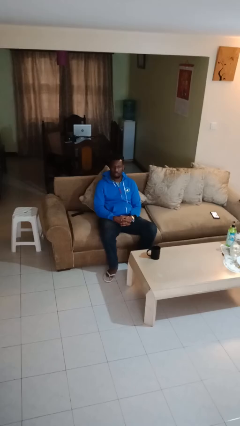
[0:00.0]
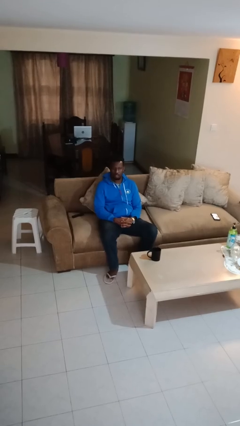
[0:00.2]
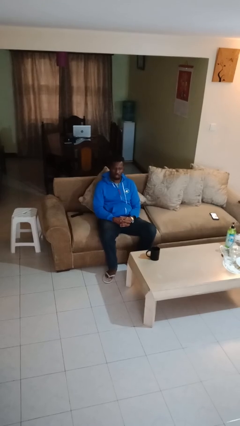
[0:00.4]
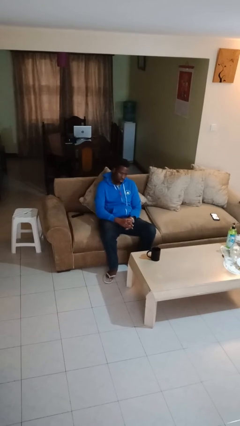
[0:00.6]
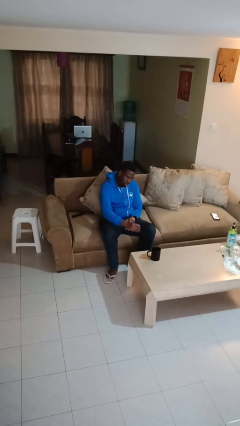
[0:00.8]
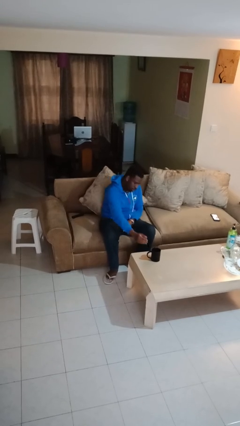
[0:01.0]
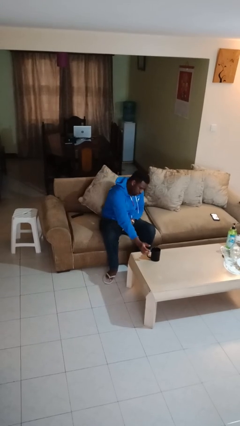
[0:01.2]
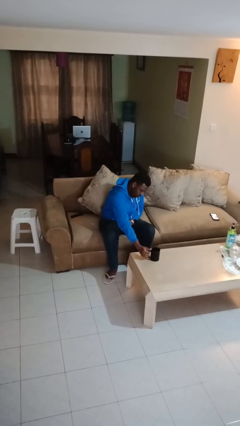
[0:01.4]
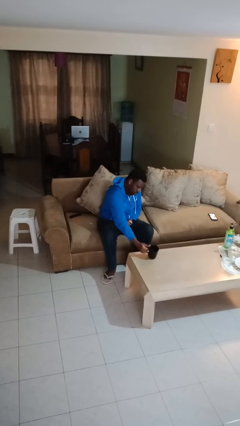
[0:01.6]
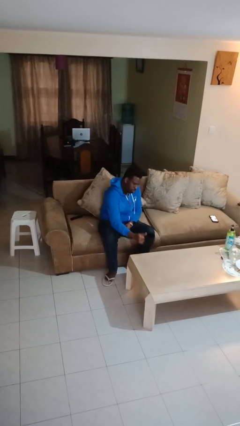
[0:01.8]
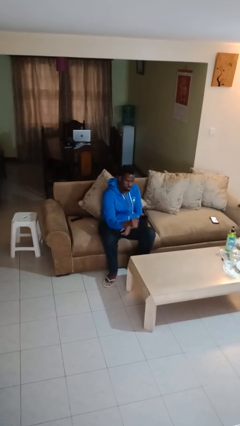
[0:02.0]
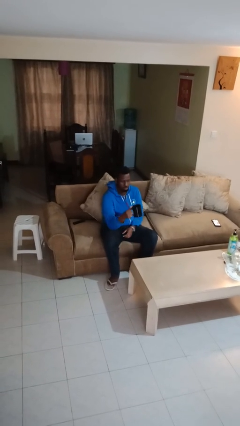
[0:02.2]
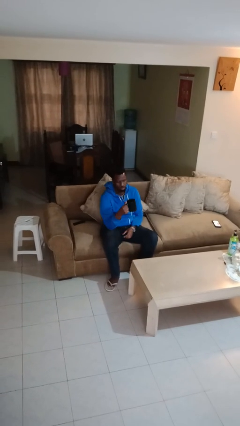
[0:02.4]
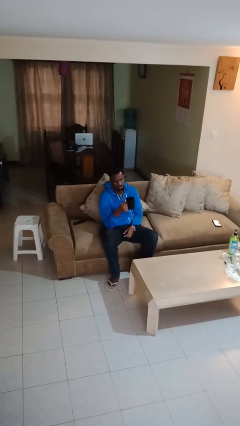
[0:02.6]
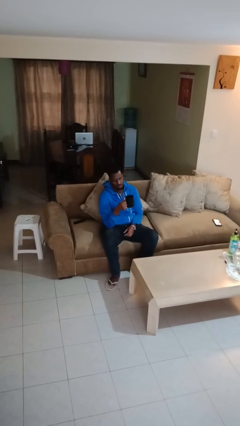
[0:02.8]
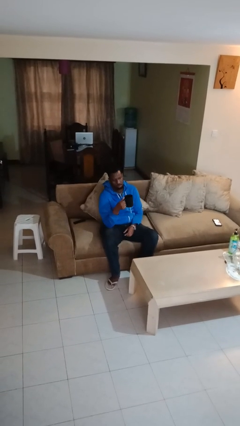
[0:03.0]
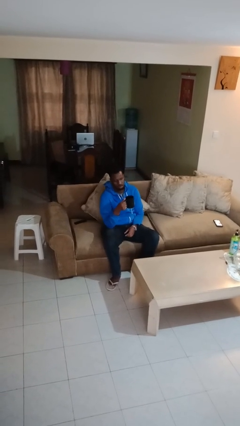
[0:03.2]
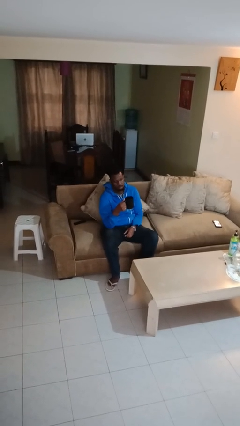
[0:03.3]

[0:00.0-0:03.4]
person picks up object from table

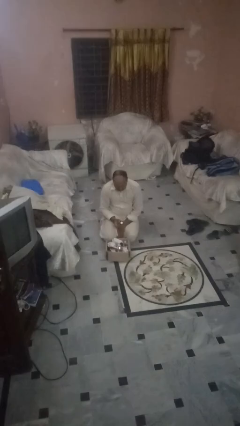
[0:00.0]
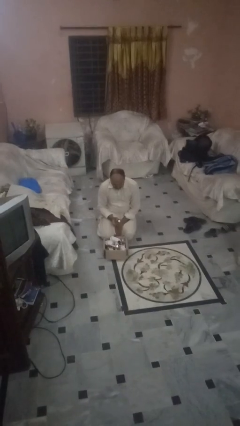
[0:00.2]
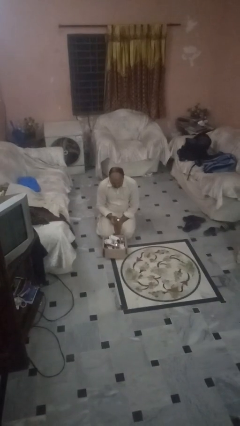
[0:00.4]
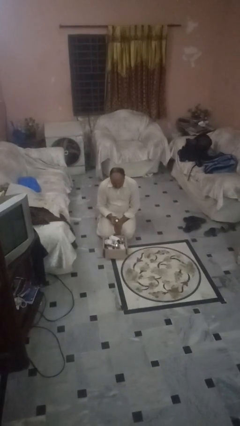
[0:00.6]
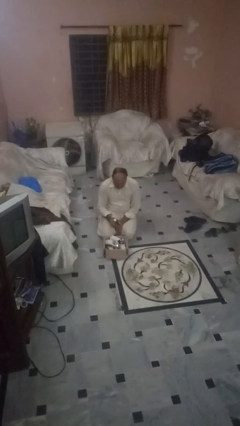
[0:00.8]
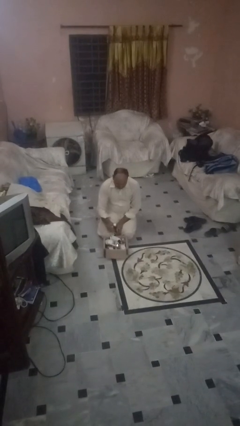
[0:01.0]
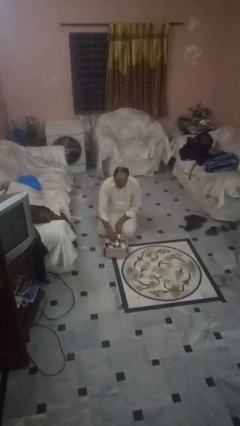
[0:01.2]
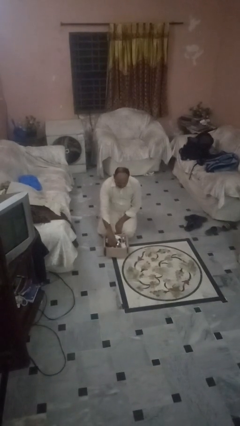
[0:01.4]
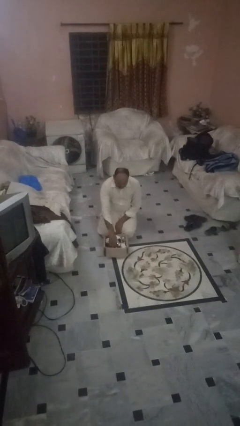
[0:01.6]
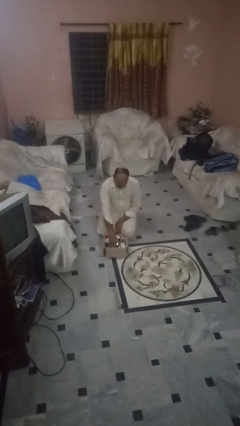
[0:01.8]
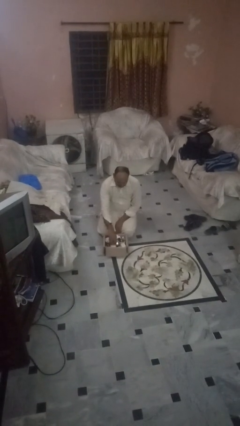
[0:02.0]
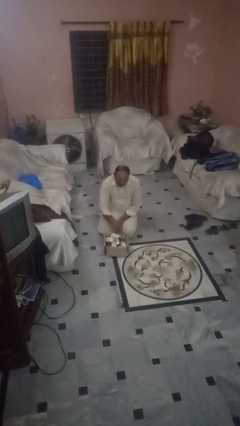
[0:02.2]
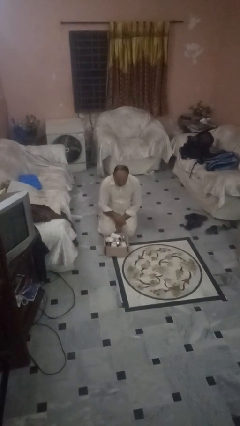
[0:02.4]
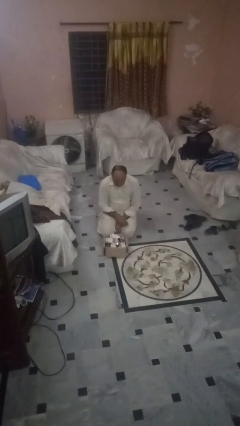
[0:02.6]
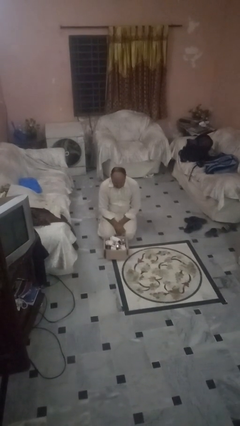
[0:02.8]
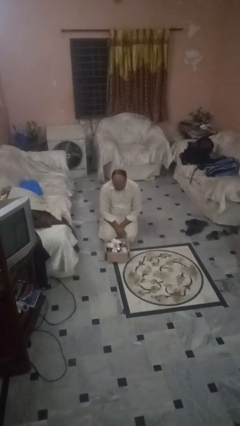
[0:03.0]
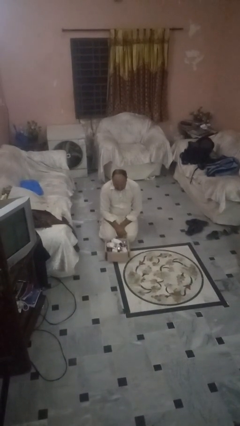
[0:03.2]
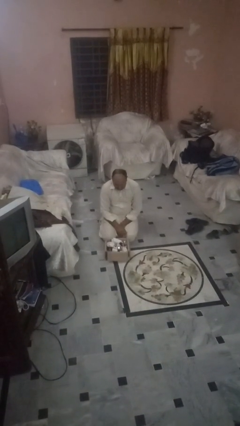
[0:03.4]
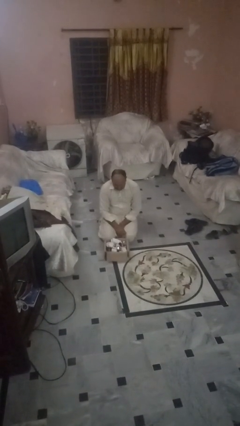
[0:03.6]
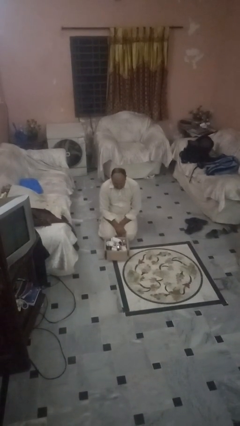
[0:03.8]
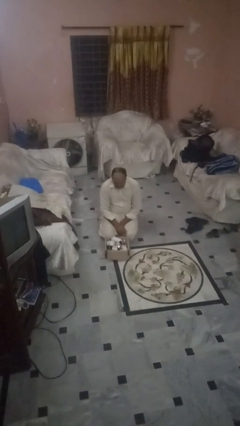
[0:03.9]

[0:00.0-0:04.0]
person puts object into box

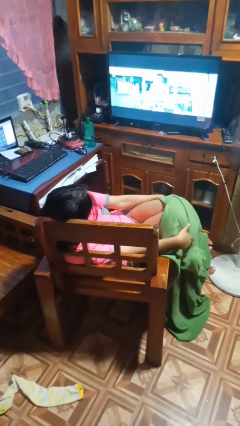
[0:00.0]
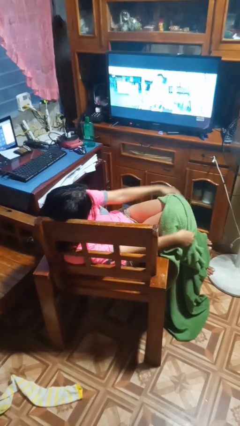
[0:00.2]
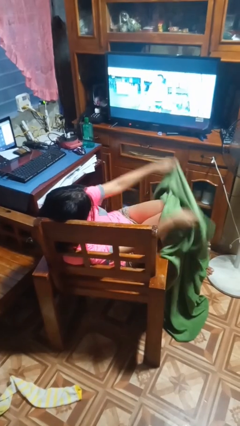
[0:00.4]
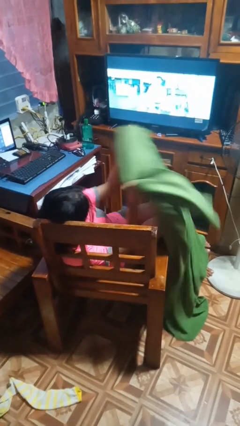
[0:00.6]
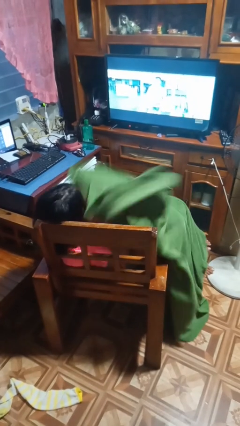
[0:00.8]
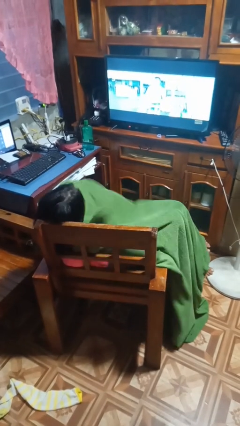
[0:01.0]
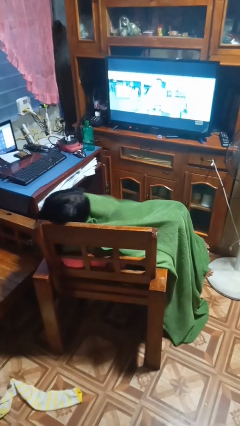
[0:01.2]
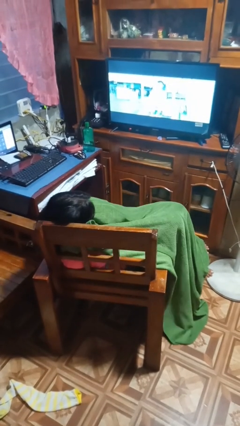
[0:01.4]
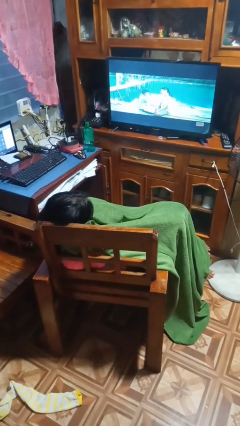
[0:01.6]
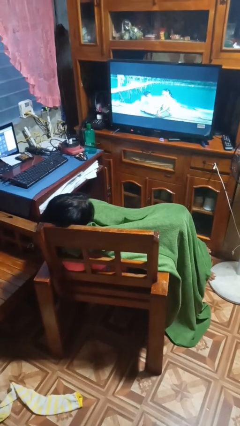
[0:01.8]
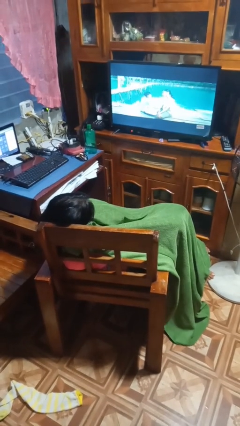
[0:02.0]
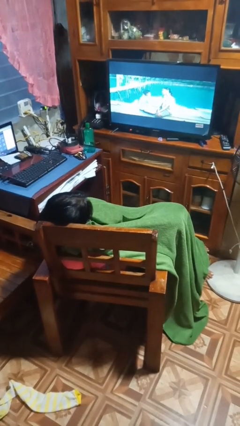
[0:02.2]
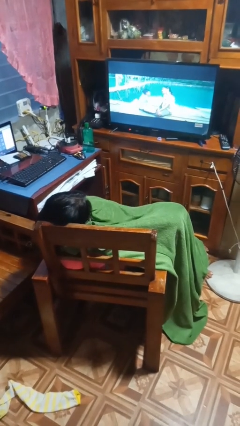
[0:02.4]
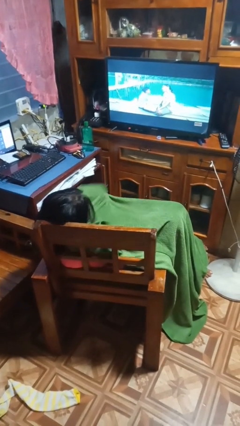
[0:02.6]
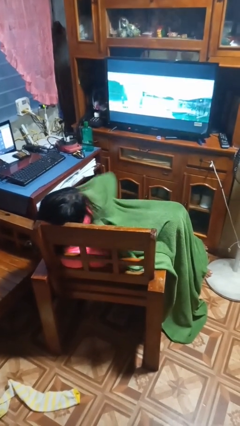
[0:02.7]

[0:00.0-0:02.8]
person covers with blanket

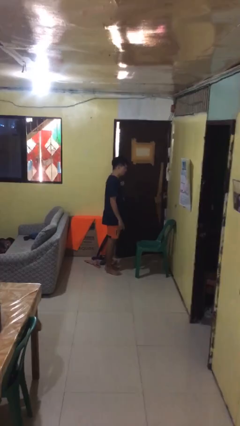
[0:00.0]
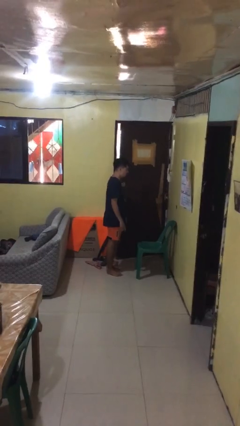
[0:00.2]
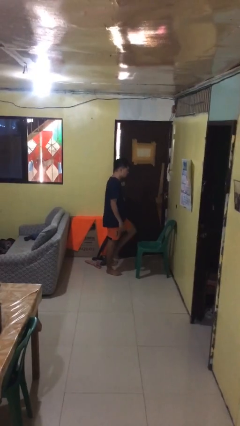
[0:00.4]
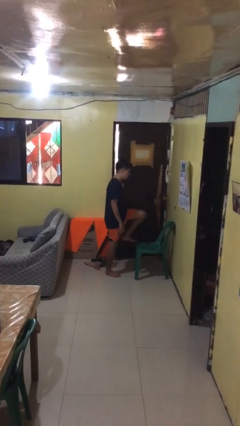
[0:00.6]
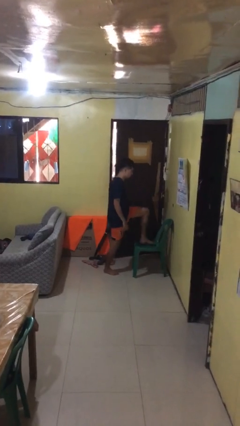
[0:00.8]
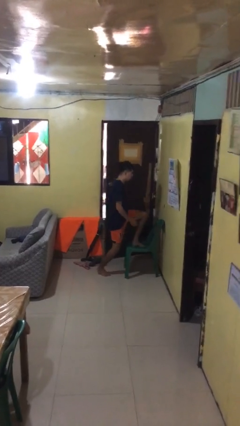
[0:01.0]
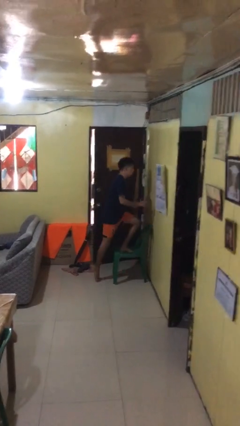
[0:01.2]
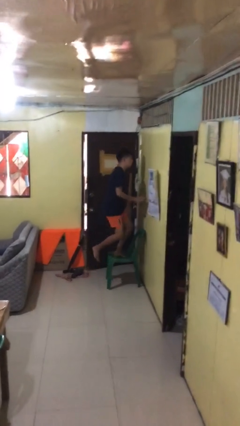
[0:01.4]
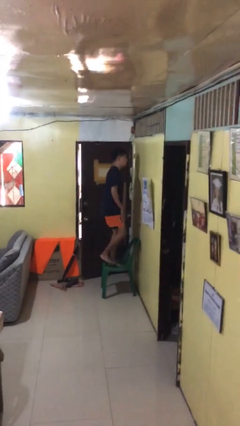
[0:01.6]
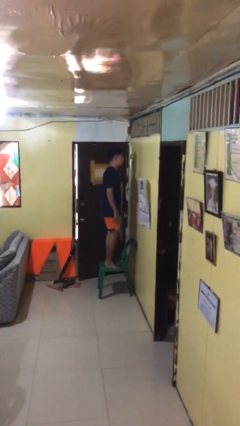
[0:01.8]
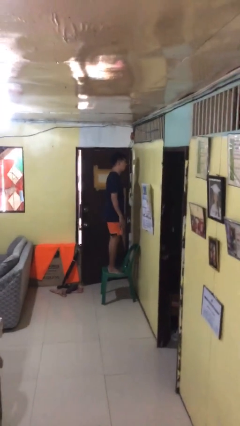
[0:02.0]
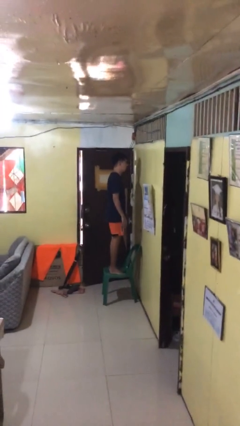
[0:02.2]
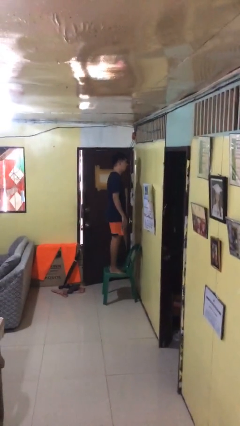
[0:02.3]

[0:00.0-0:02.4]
person climbs on chair

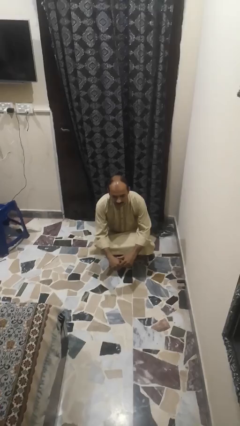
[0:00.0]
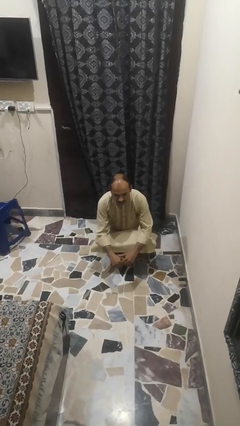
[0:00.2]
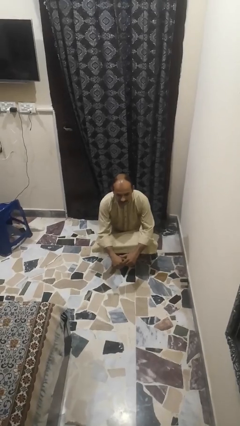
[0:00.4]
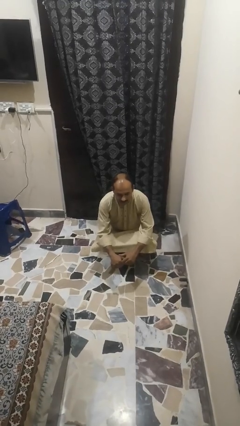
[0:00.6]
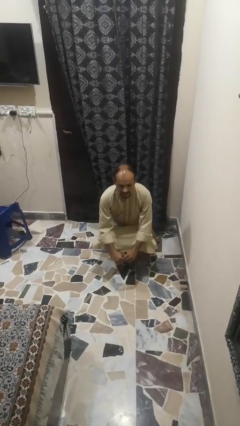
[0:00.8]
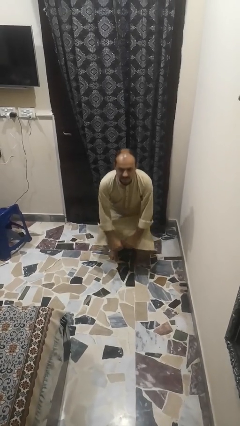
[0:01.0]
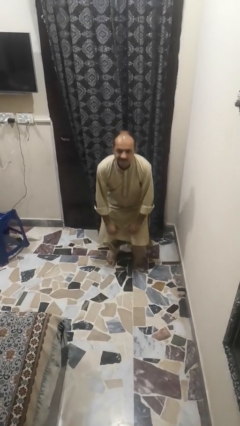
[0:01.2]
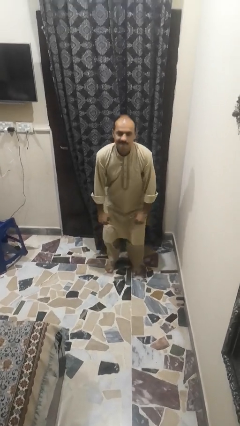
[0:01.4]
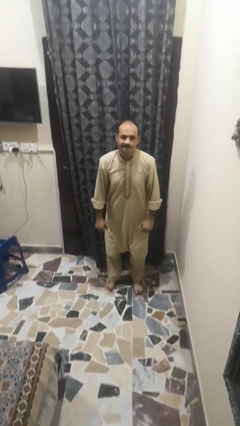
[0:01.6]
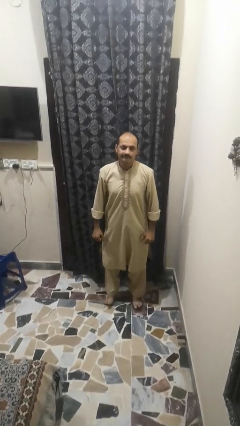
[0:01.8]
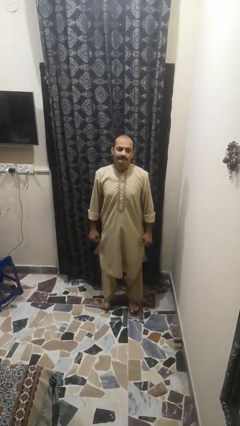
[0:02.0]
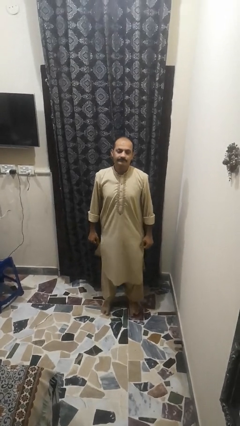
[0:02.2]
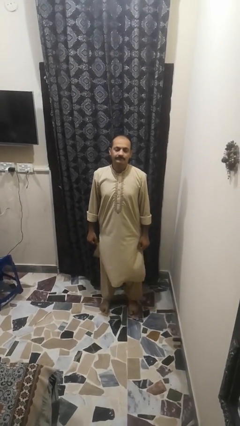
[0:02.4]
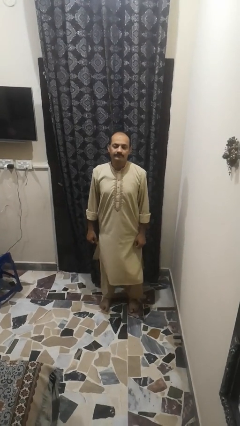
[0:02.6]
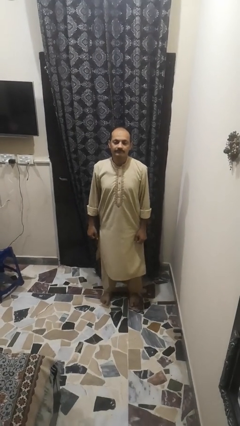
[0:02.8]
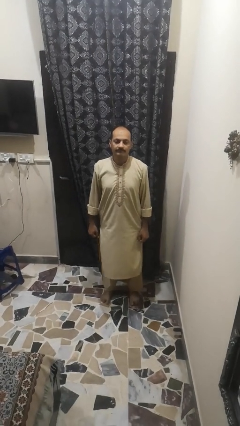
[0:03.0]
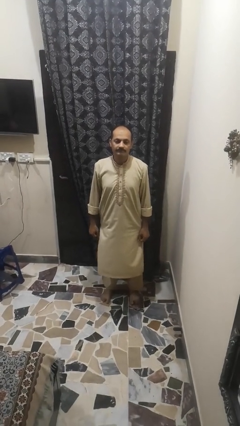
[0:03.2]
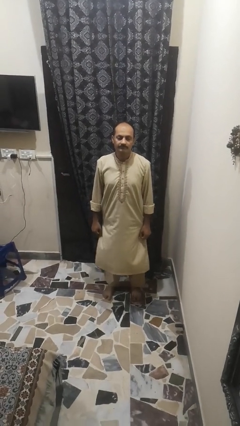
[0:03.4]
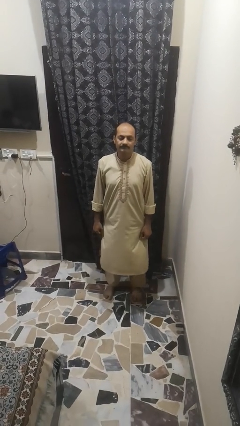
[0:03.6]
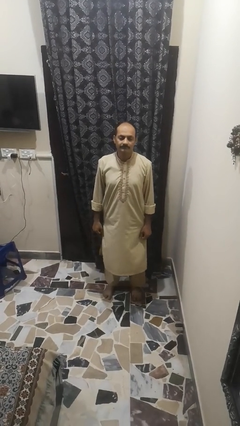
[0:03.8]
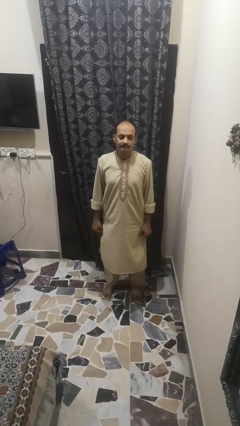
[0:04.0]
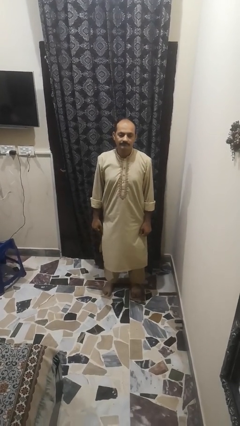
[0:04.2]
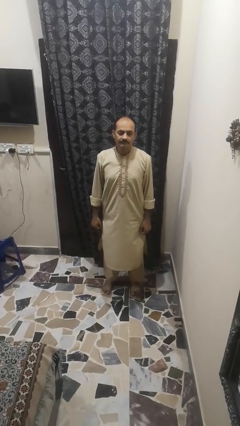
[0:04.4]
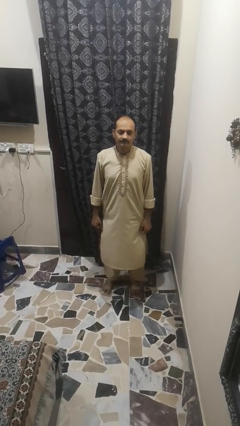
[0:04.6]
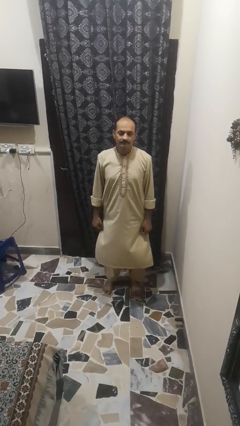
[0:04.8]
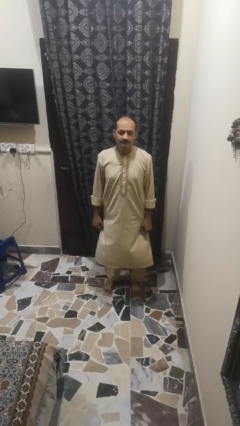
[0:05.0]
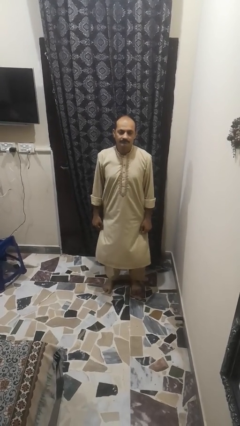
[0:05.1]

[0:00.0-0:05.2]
person stands up

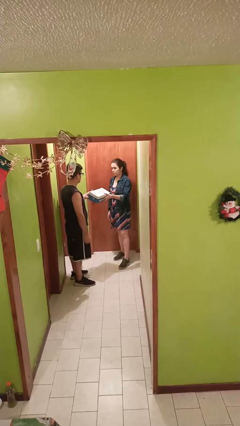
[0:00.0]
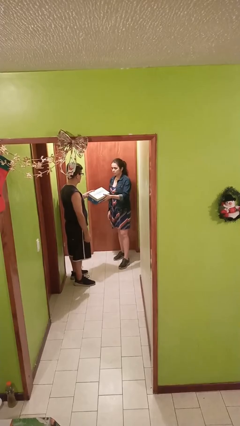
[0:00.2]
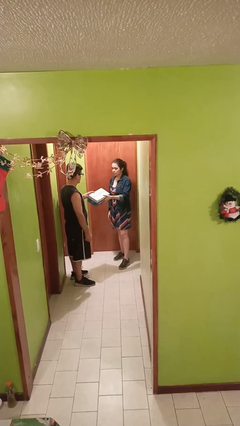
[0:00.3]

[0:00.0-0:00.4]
person transfers object to person
